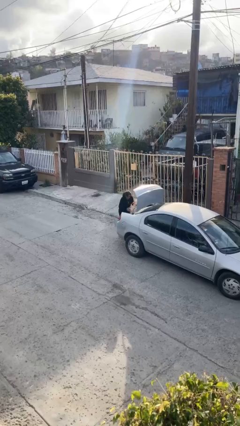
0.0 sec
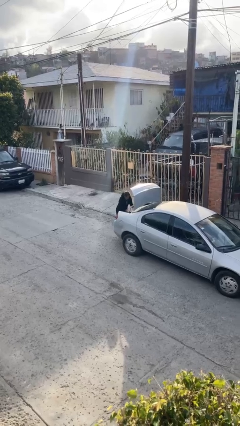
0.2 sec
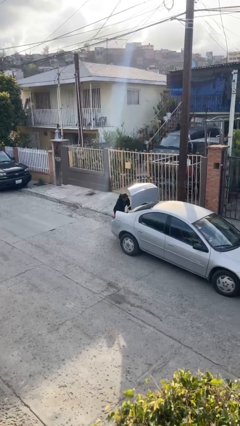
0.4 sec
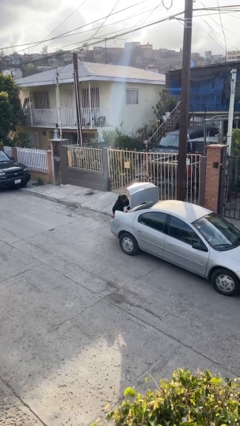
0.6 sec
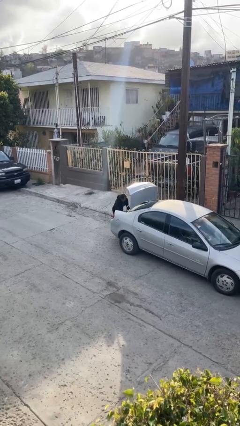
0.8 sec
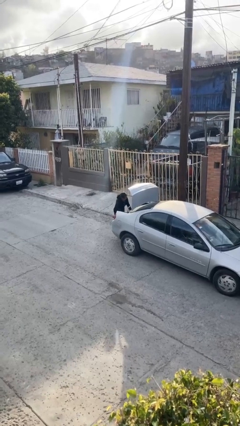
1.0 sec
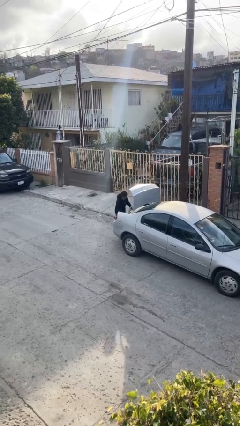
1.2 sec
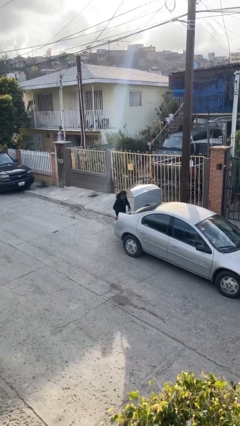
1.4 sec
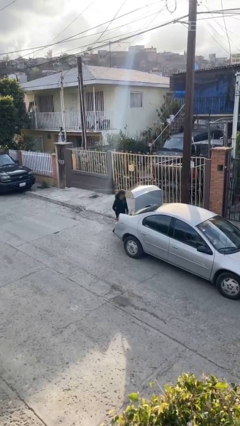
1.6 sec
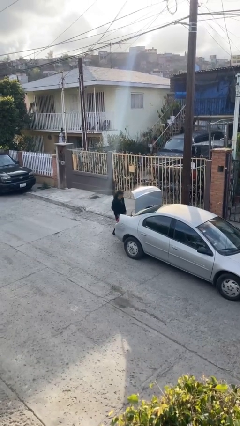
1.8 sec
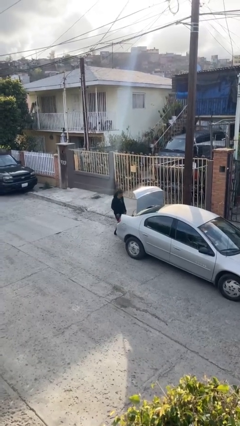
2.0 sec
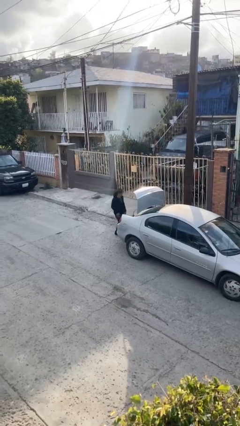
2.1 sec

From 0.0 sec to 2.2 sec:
person loads car

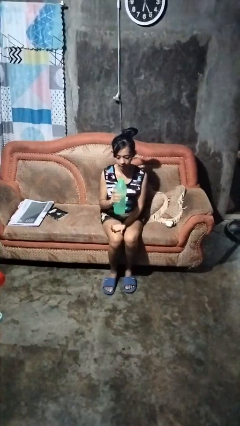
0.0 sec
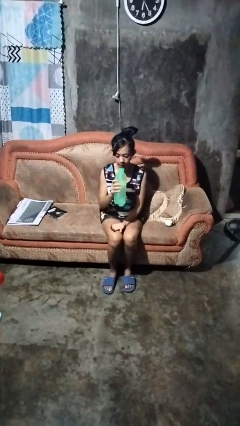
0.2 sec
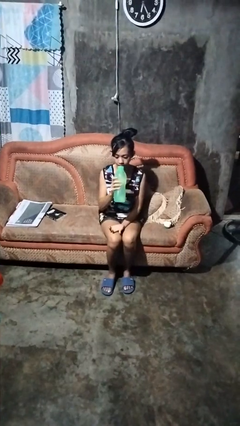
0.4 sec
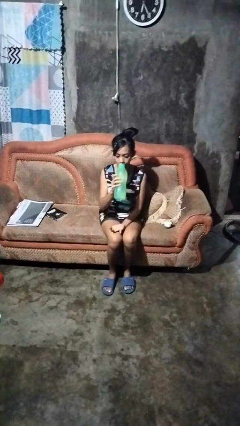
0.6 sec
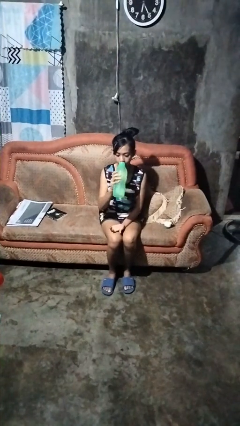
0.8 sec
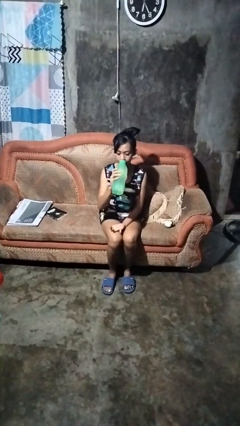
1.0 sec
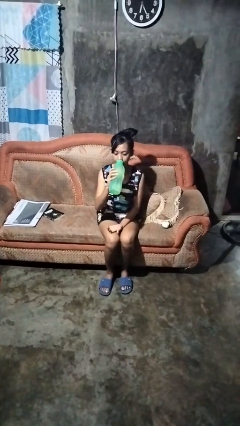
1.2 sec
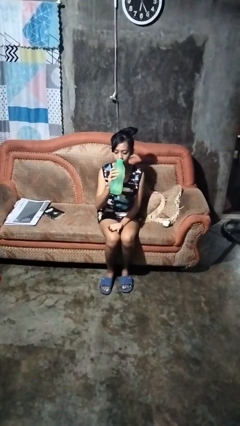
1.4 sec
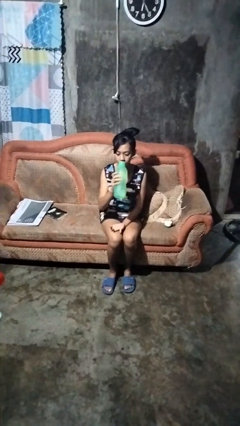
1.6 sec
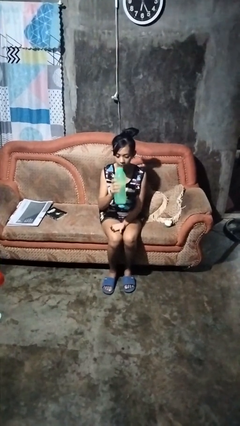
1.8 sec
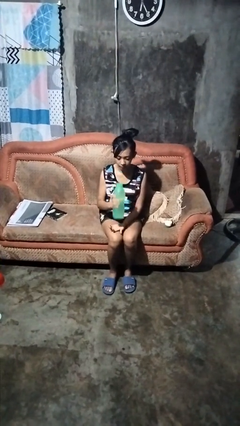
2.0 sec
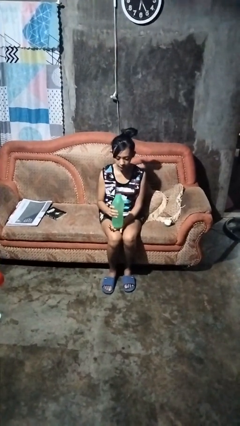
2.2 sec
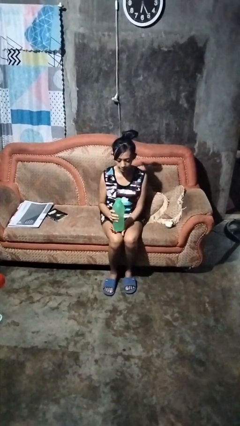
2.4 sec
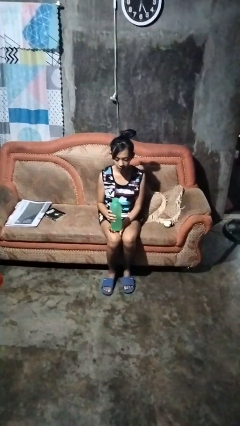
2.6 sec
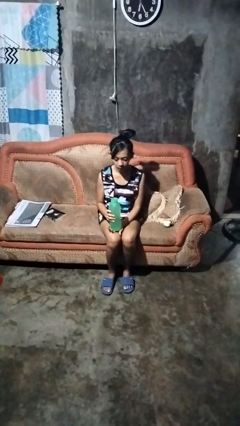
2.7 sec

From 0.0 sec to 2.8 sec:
person drinks from bottle

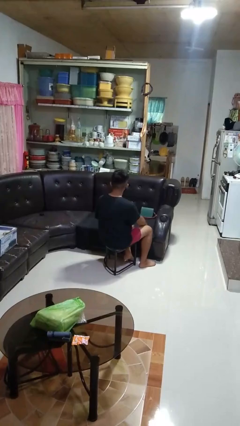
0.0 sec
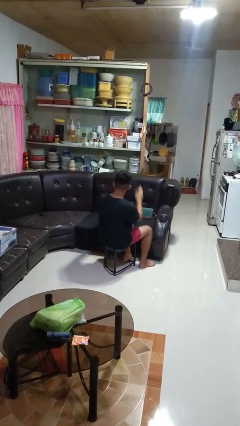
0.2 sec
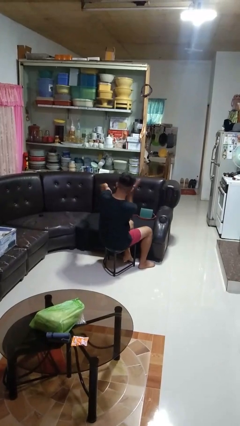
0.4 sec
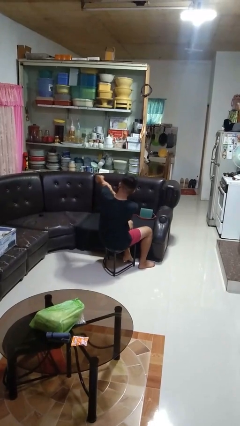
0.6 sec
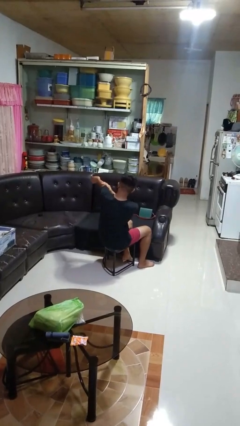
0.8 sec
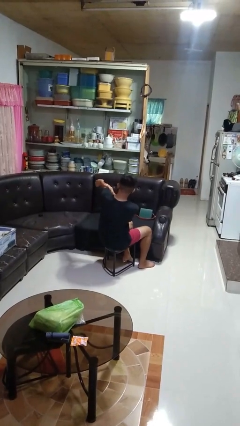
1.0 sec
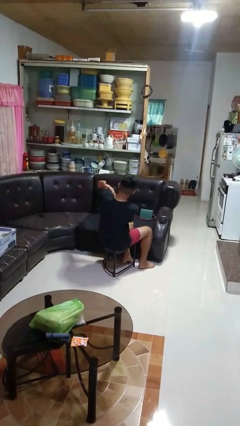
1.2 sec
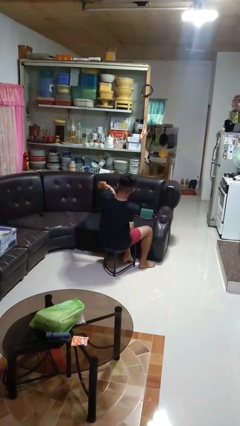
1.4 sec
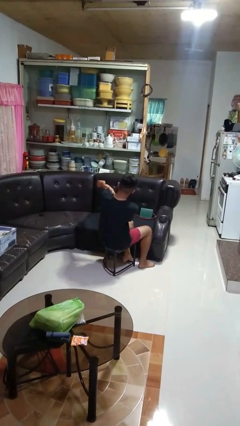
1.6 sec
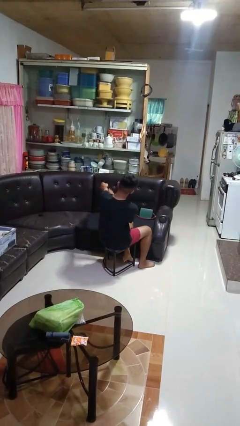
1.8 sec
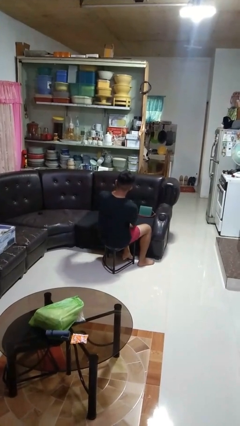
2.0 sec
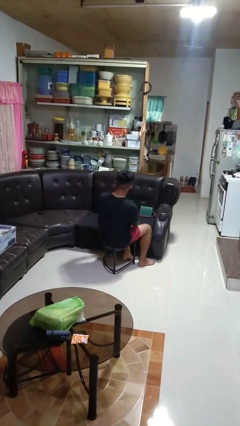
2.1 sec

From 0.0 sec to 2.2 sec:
person swats bug

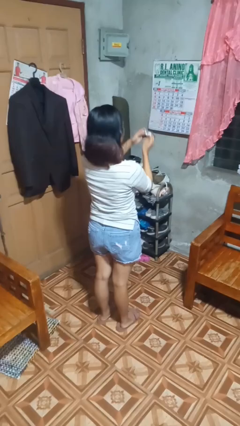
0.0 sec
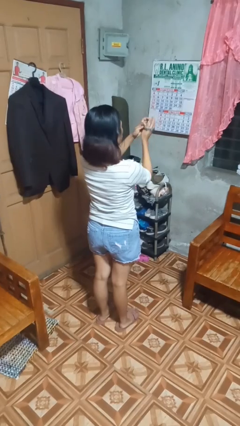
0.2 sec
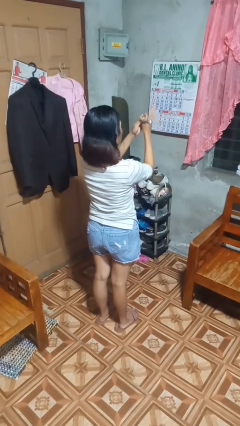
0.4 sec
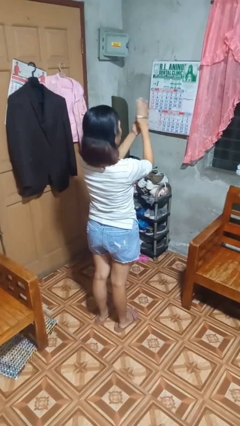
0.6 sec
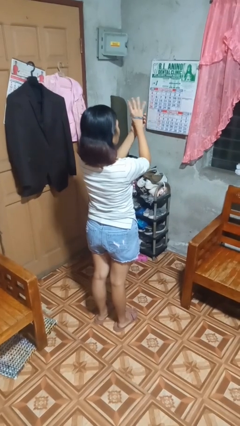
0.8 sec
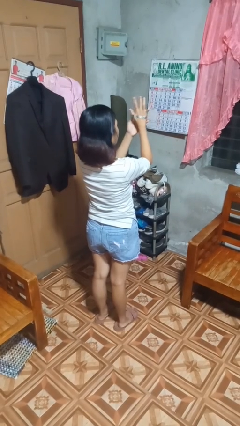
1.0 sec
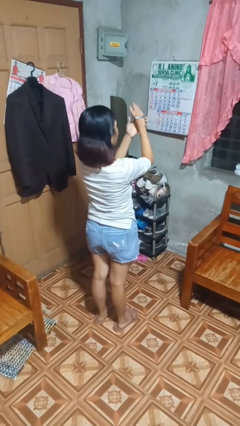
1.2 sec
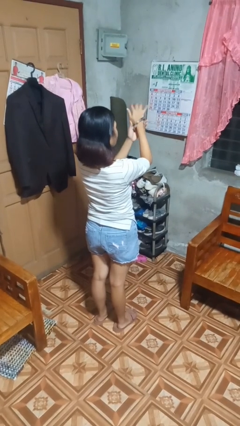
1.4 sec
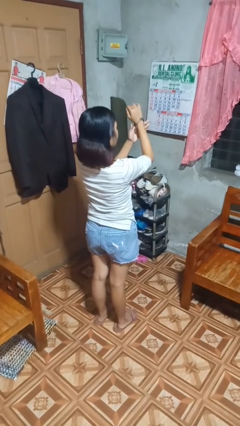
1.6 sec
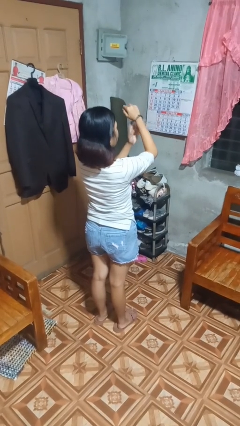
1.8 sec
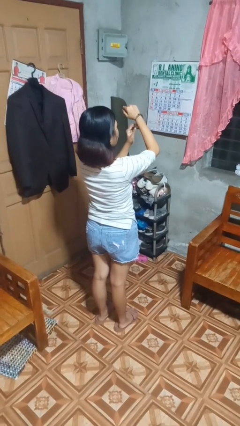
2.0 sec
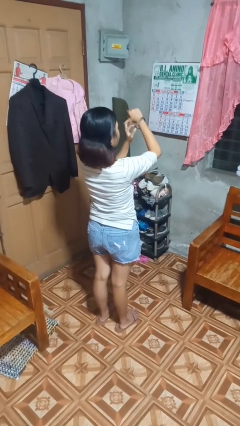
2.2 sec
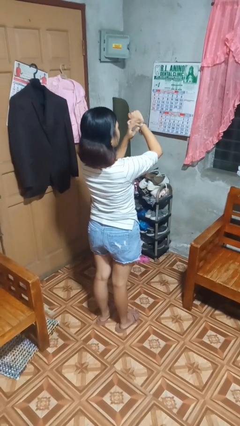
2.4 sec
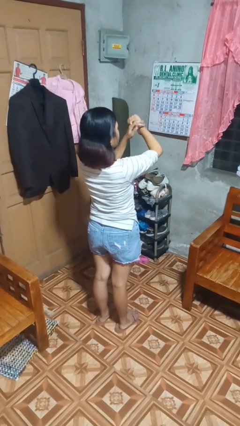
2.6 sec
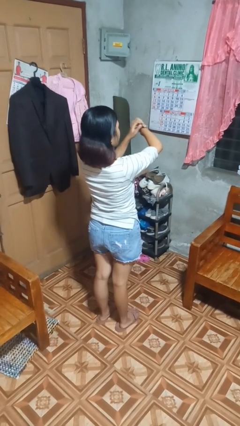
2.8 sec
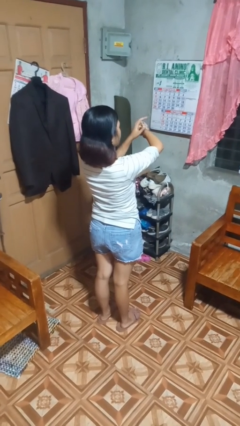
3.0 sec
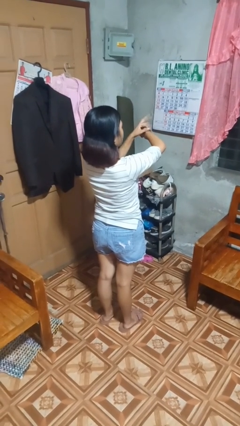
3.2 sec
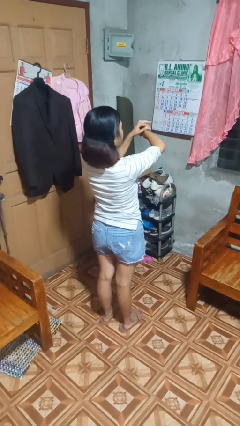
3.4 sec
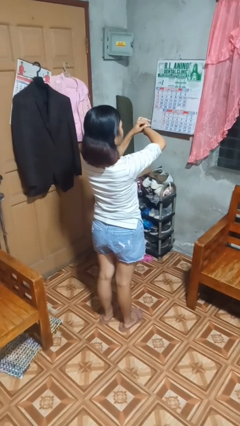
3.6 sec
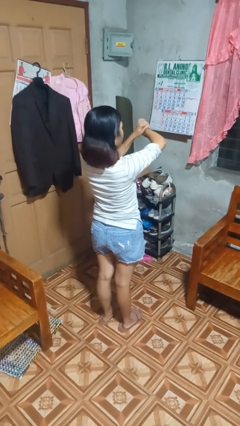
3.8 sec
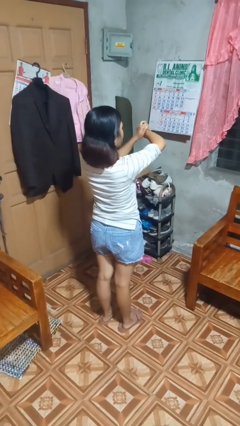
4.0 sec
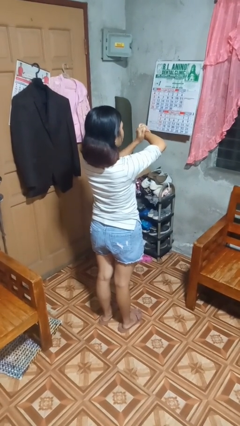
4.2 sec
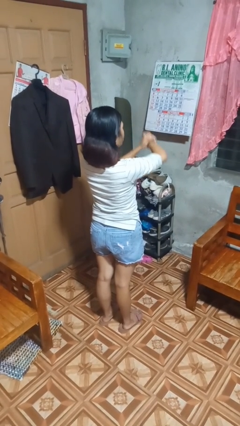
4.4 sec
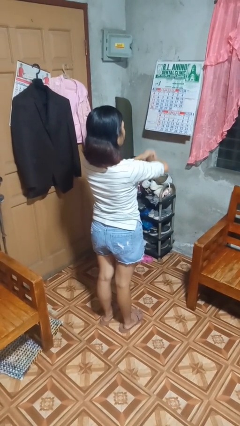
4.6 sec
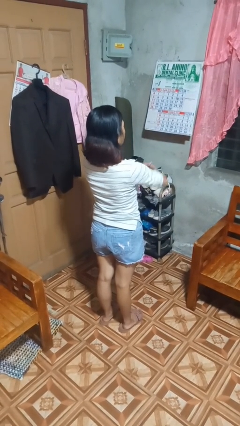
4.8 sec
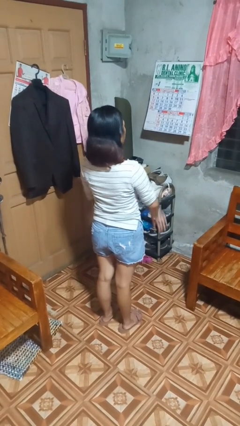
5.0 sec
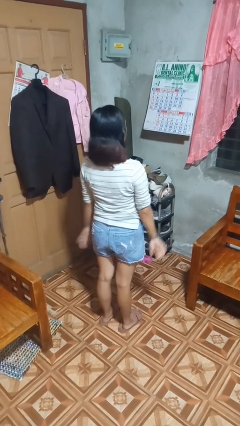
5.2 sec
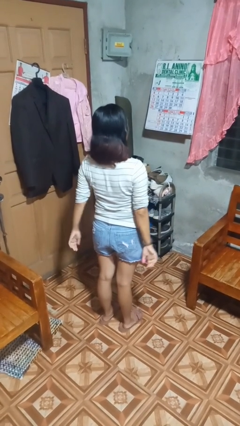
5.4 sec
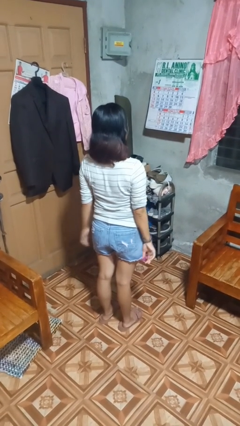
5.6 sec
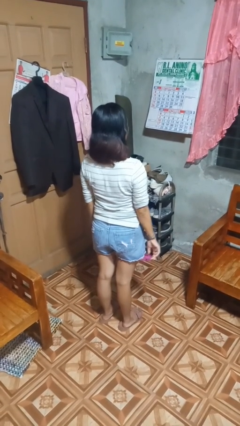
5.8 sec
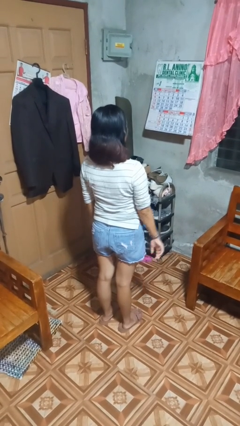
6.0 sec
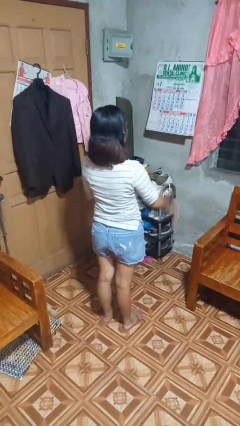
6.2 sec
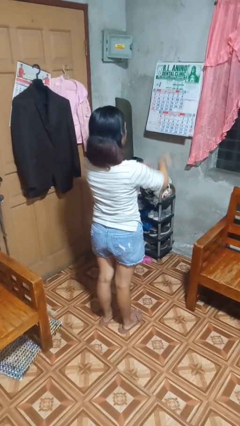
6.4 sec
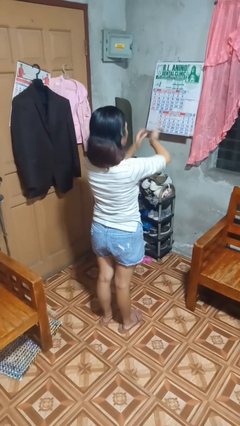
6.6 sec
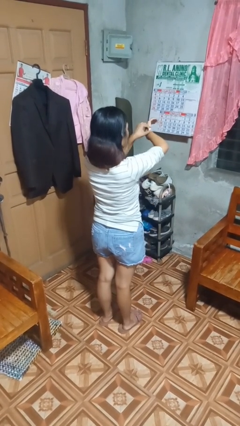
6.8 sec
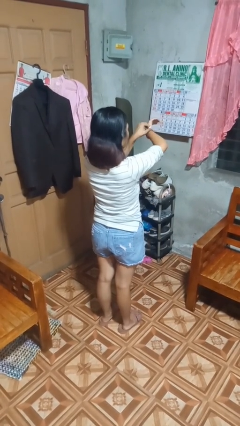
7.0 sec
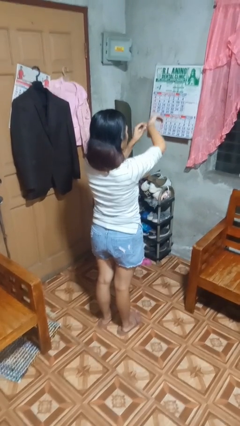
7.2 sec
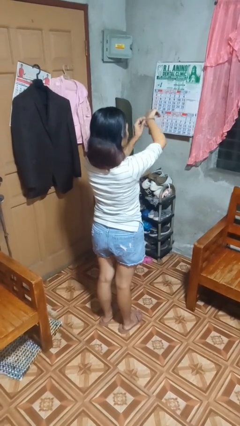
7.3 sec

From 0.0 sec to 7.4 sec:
person puts on wristwatch

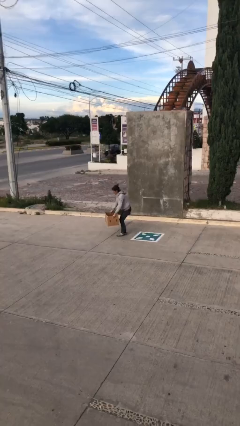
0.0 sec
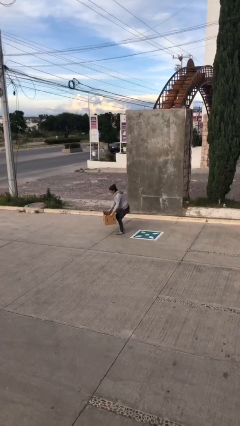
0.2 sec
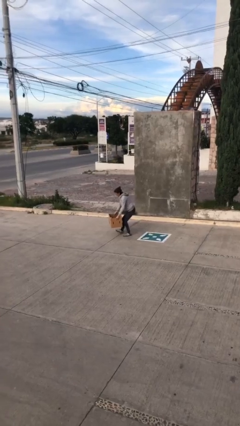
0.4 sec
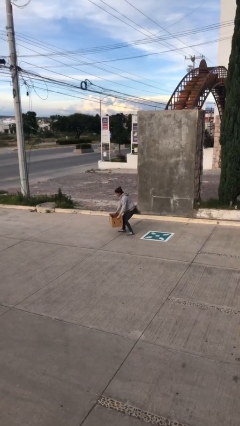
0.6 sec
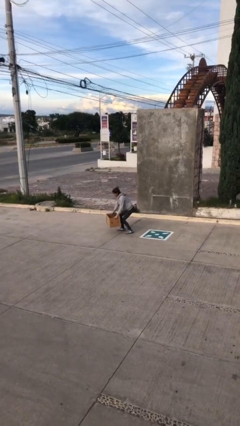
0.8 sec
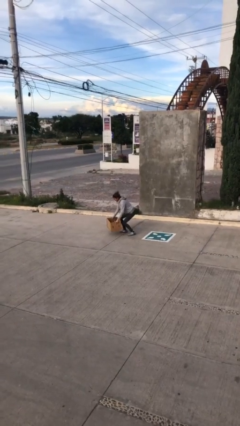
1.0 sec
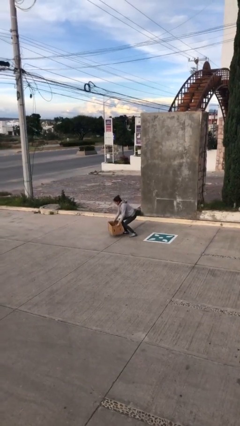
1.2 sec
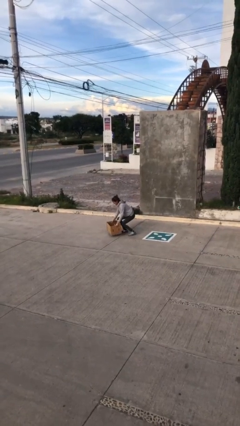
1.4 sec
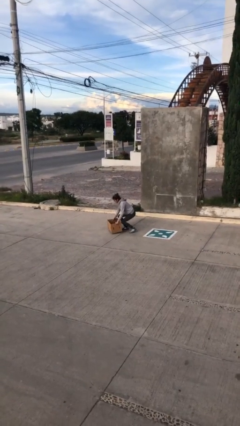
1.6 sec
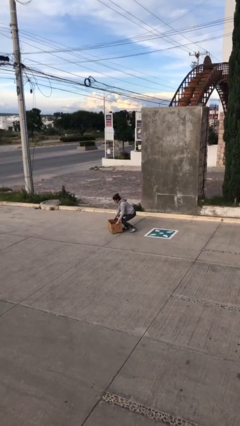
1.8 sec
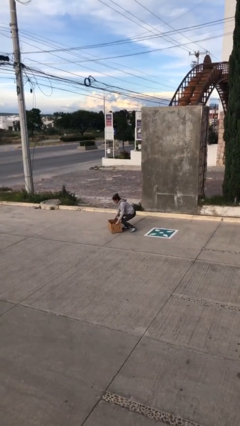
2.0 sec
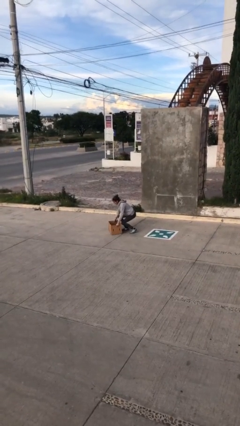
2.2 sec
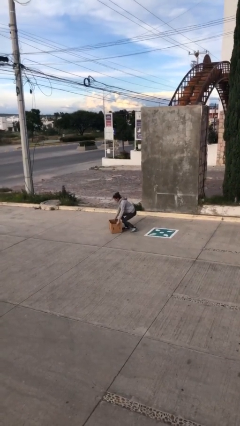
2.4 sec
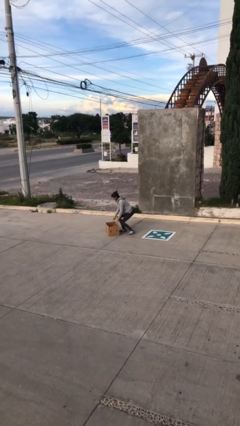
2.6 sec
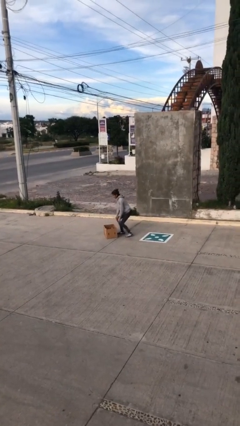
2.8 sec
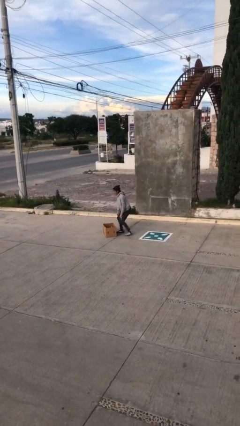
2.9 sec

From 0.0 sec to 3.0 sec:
person puts down object on floor

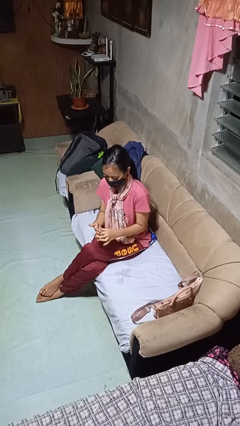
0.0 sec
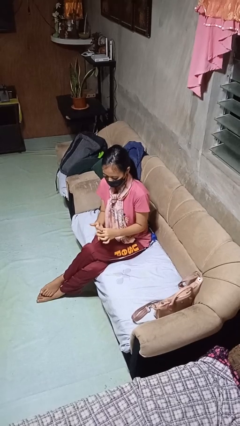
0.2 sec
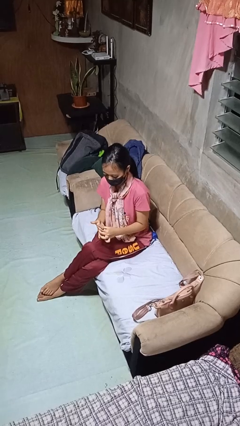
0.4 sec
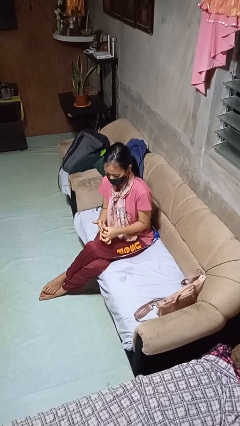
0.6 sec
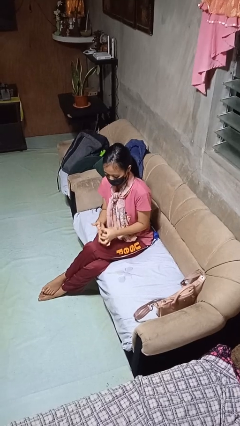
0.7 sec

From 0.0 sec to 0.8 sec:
person takes off ring
